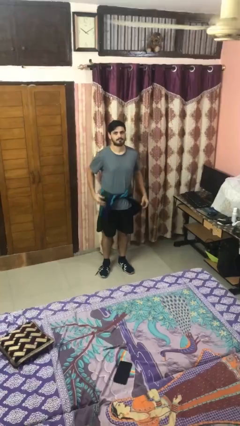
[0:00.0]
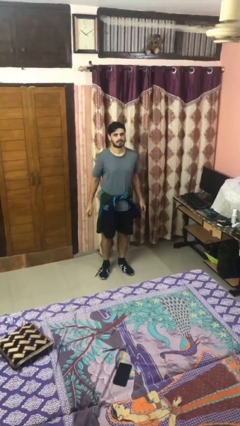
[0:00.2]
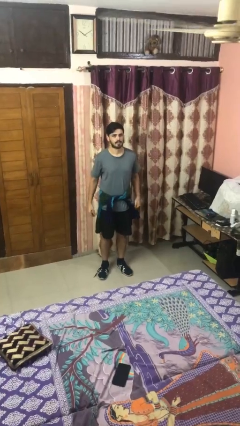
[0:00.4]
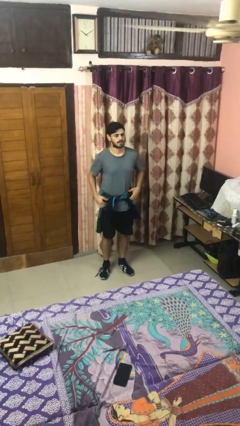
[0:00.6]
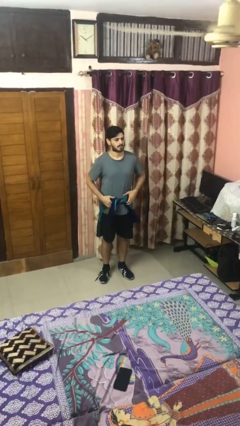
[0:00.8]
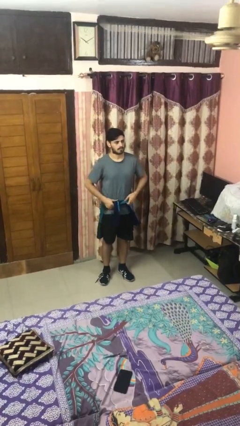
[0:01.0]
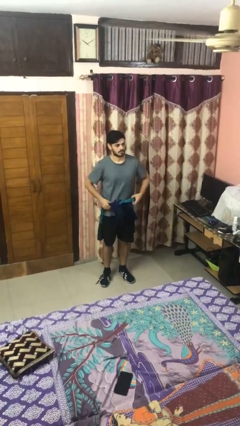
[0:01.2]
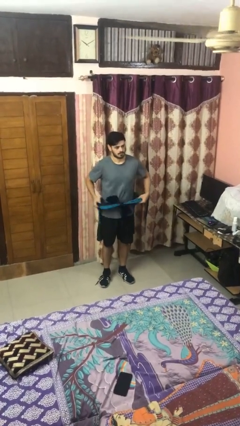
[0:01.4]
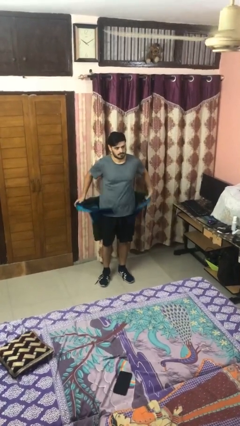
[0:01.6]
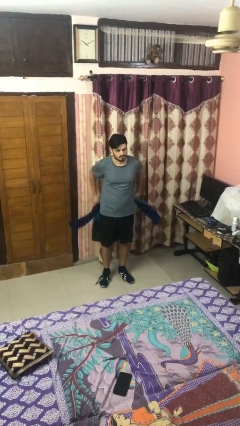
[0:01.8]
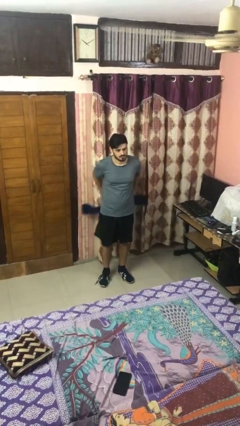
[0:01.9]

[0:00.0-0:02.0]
person unties jacket around waist

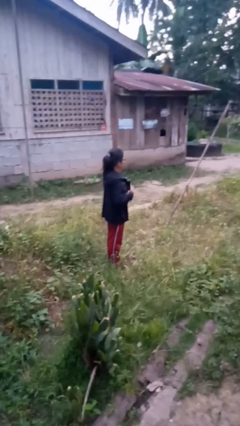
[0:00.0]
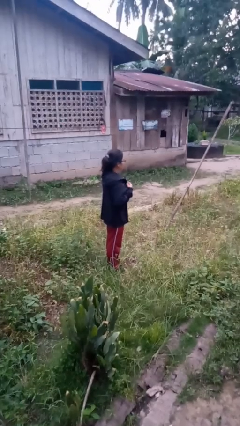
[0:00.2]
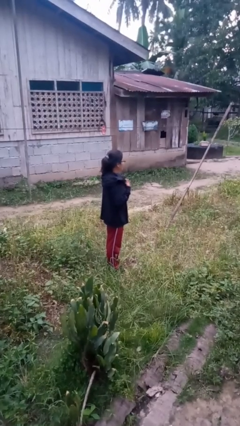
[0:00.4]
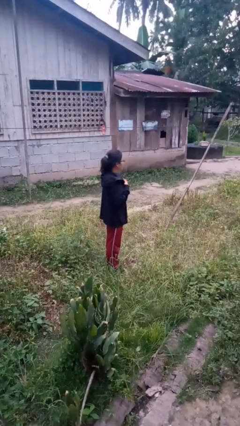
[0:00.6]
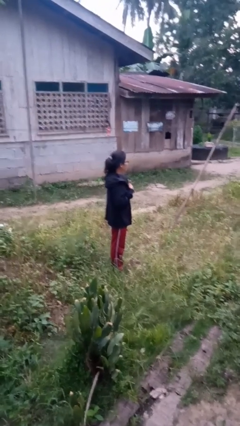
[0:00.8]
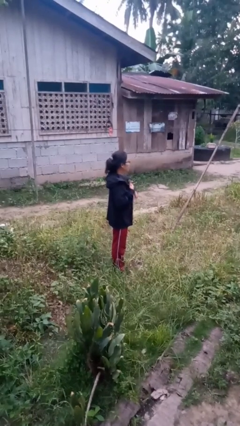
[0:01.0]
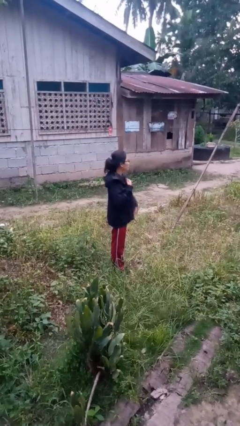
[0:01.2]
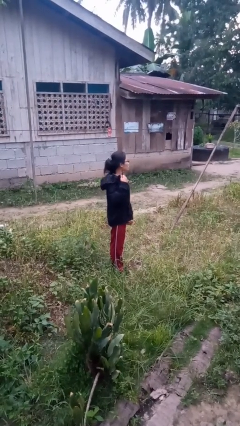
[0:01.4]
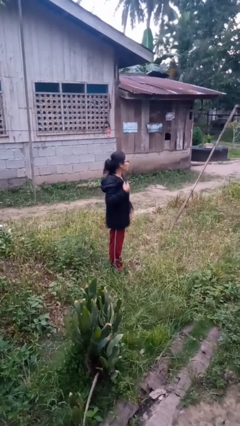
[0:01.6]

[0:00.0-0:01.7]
person unzips jacket

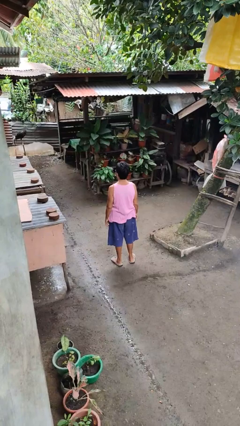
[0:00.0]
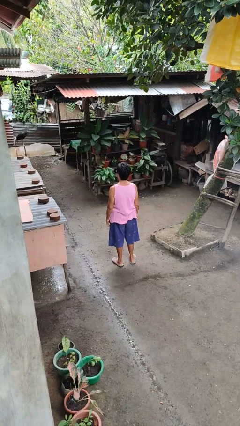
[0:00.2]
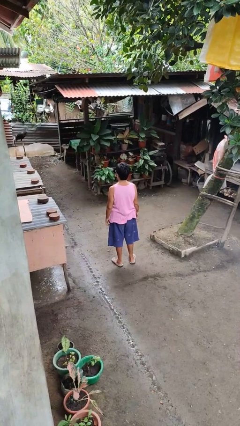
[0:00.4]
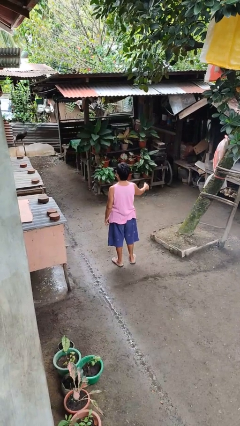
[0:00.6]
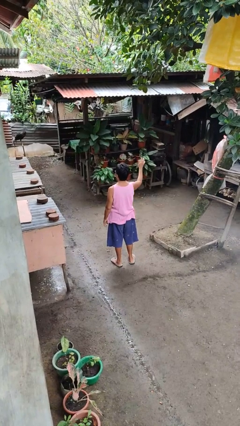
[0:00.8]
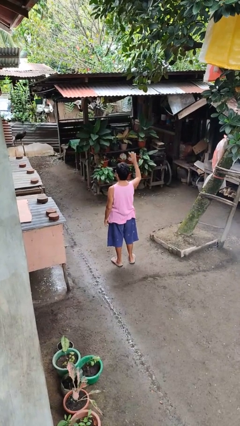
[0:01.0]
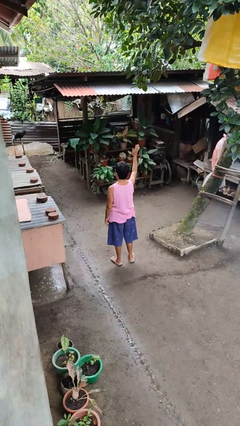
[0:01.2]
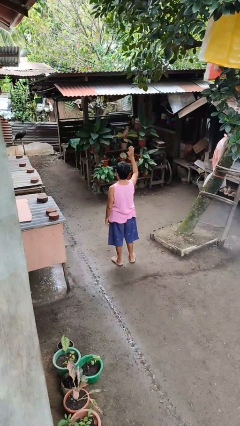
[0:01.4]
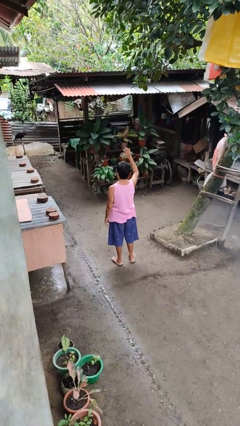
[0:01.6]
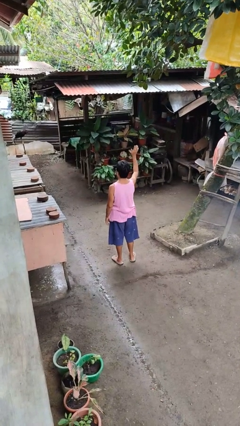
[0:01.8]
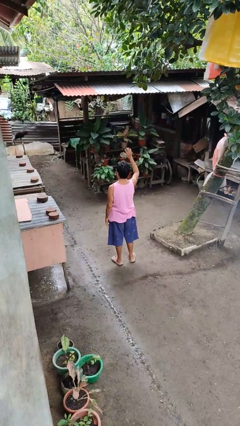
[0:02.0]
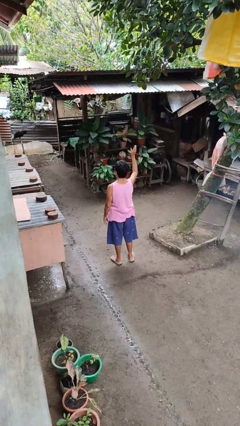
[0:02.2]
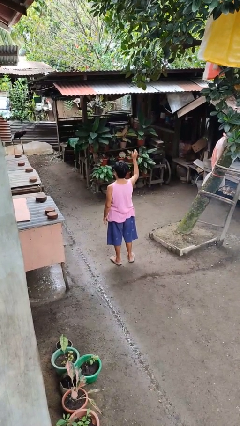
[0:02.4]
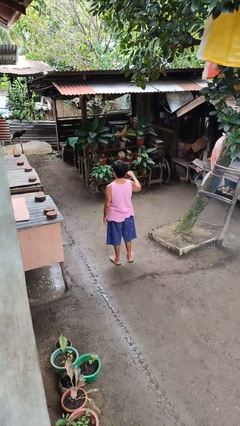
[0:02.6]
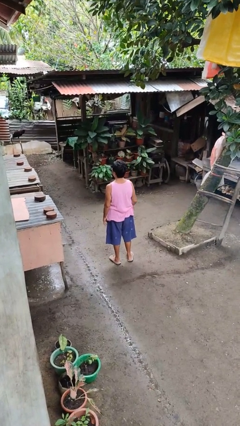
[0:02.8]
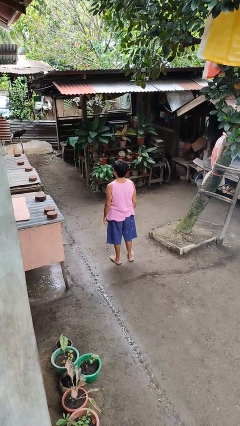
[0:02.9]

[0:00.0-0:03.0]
person waves at person

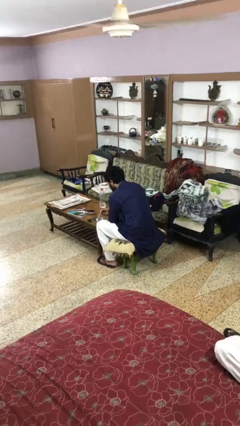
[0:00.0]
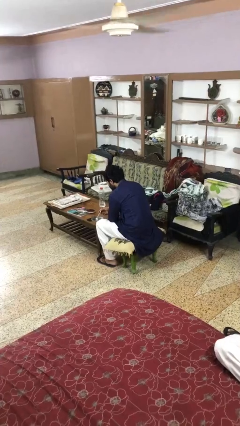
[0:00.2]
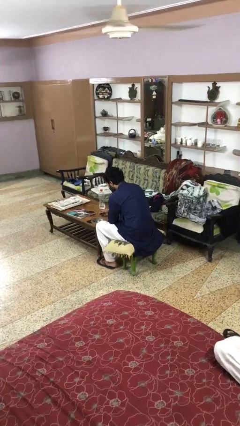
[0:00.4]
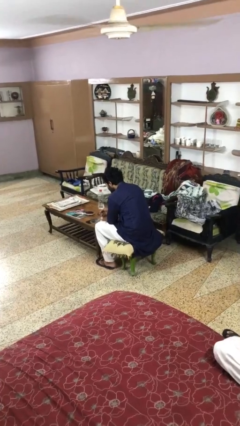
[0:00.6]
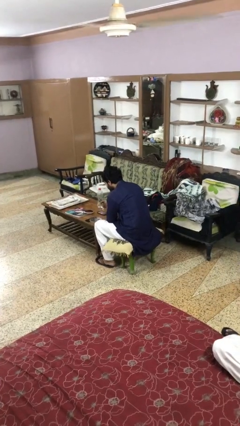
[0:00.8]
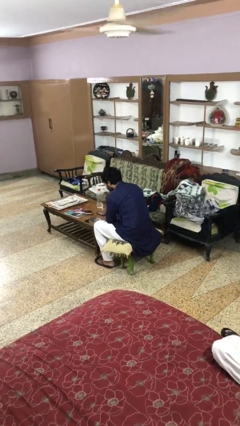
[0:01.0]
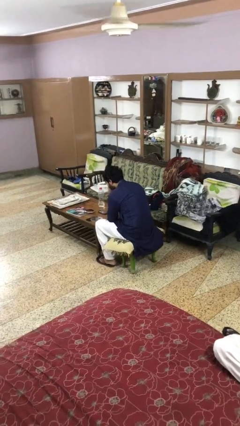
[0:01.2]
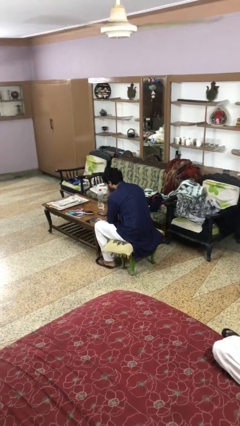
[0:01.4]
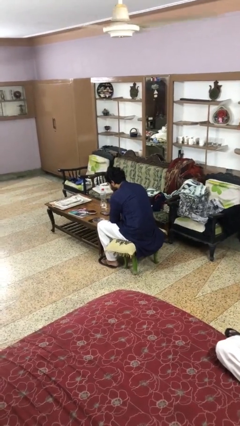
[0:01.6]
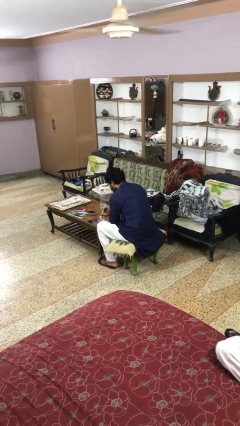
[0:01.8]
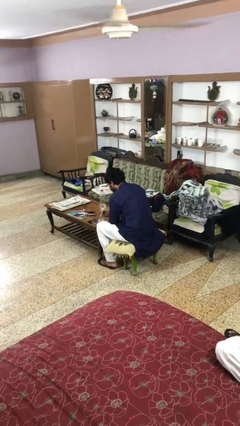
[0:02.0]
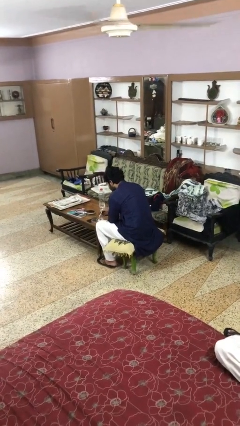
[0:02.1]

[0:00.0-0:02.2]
person eats with utensil

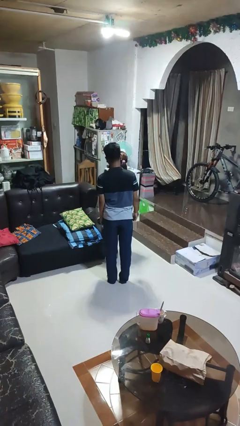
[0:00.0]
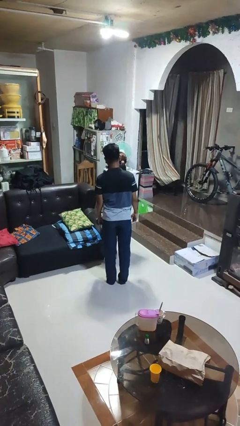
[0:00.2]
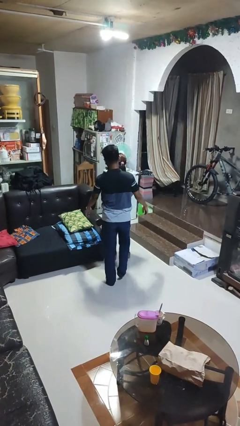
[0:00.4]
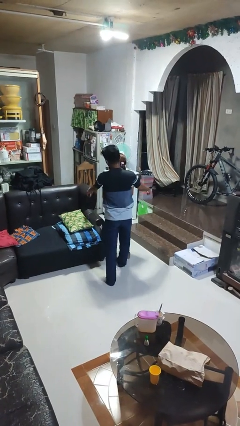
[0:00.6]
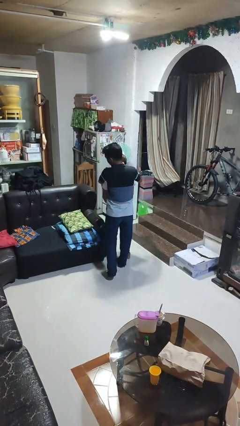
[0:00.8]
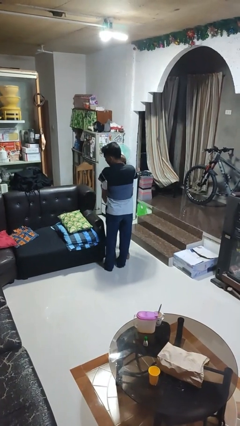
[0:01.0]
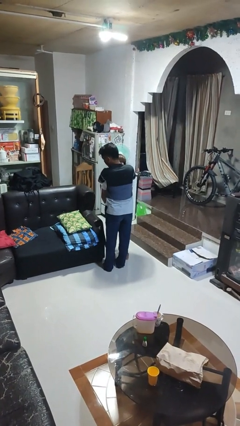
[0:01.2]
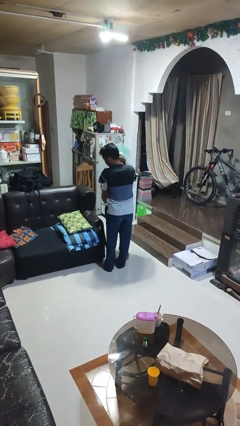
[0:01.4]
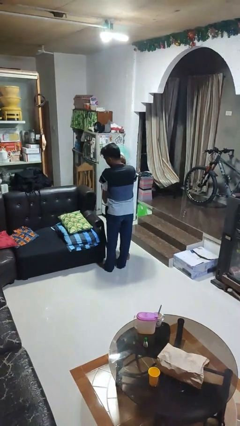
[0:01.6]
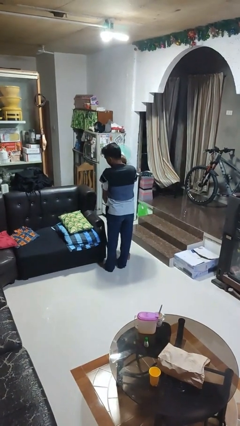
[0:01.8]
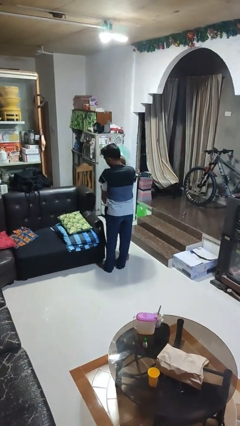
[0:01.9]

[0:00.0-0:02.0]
person hugs person from behind

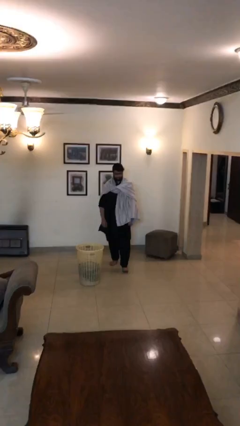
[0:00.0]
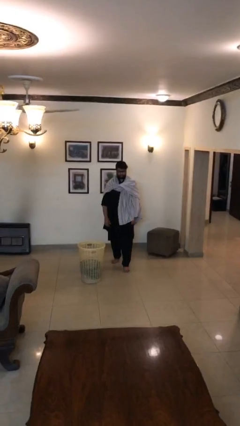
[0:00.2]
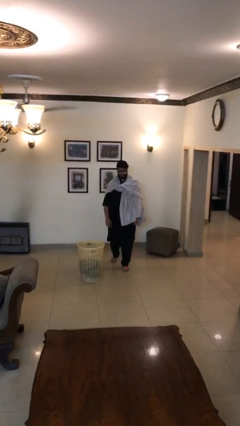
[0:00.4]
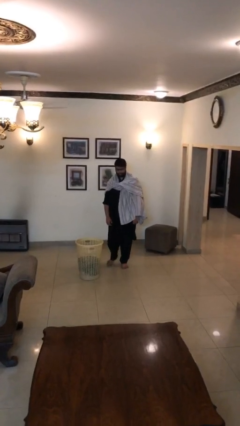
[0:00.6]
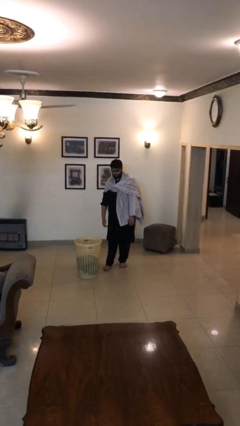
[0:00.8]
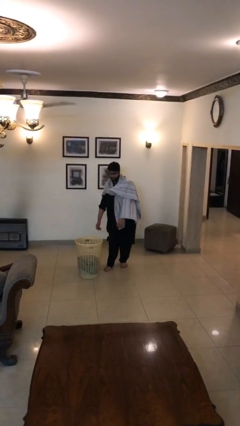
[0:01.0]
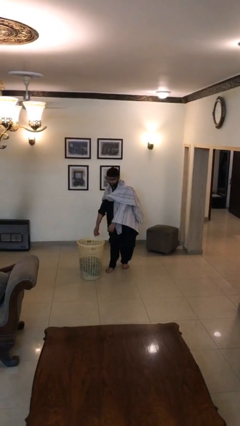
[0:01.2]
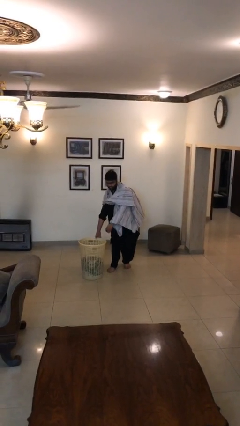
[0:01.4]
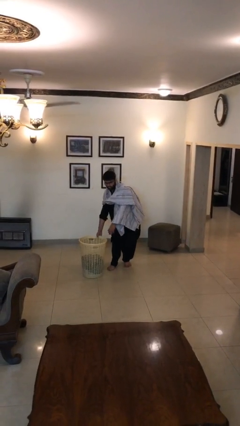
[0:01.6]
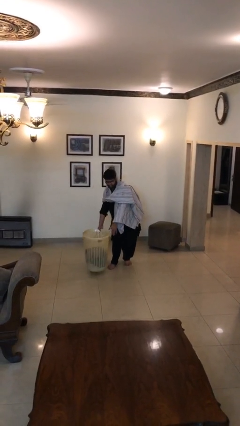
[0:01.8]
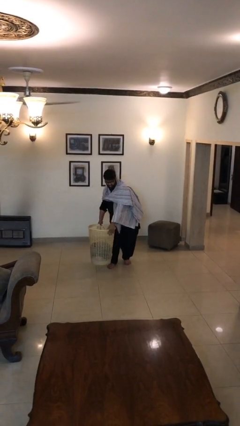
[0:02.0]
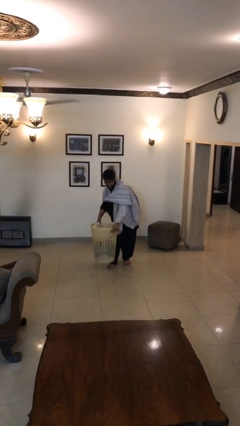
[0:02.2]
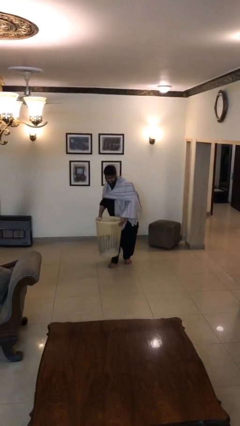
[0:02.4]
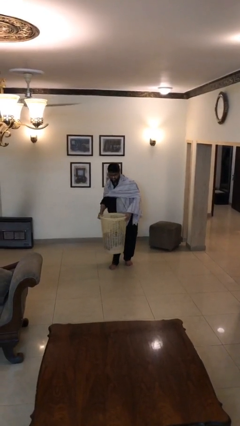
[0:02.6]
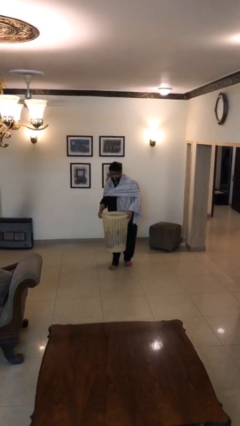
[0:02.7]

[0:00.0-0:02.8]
person picks up object from floor

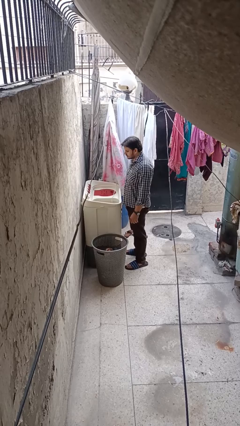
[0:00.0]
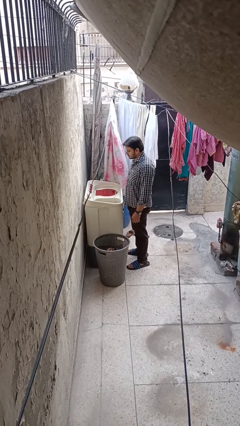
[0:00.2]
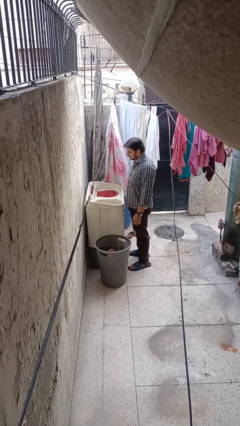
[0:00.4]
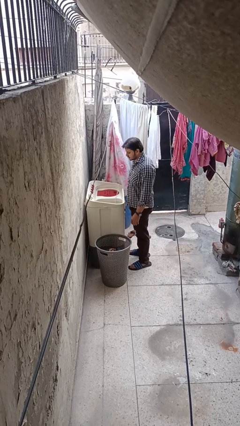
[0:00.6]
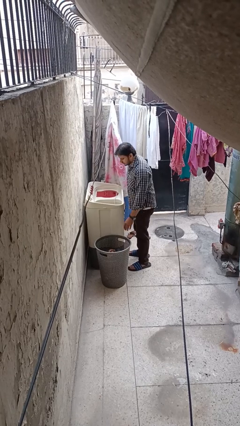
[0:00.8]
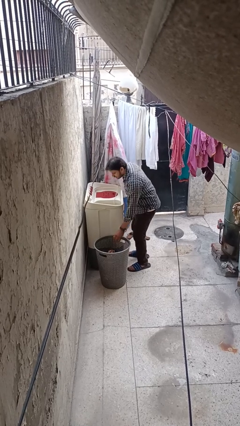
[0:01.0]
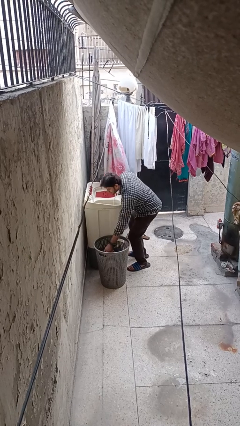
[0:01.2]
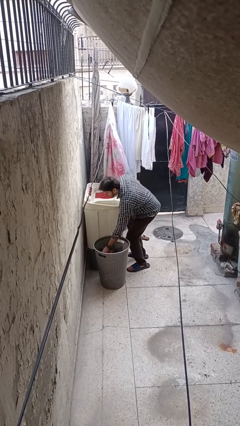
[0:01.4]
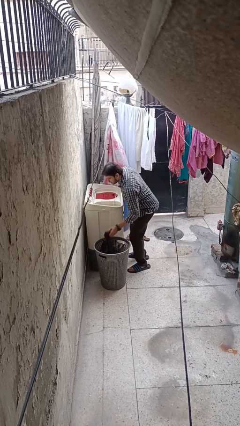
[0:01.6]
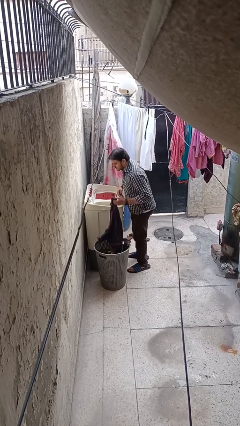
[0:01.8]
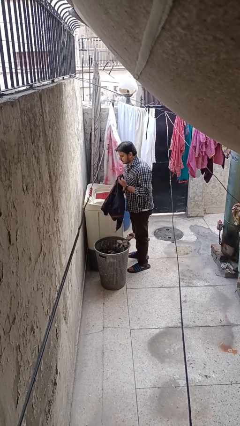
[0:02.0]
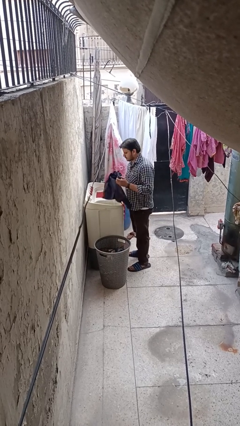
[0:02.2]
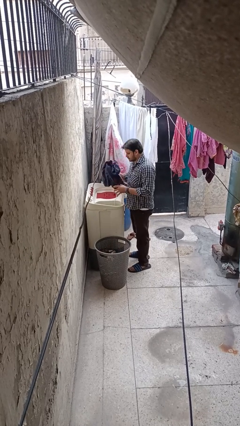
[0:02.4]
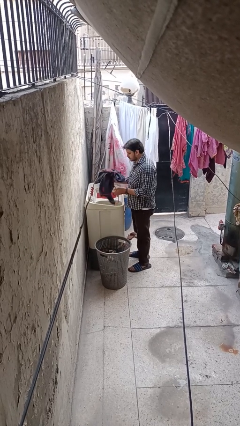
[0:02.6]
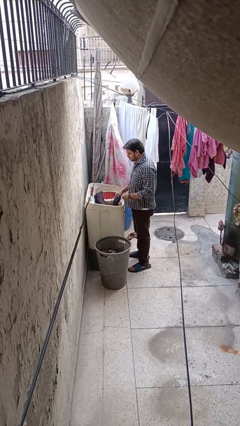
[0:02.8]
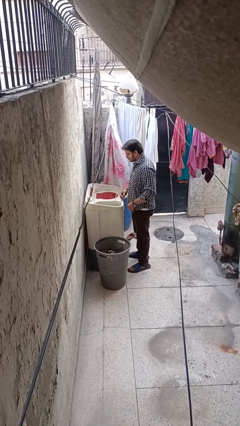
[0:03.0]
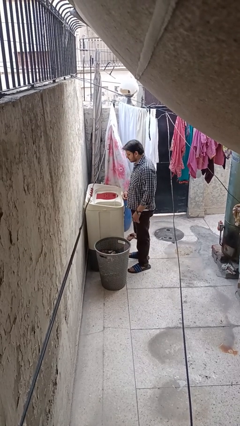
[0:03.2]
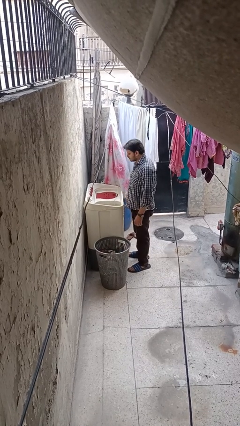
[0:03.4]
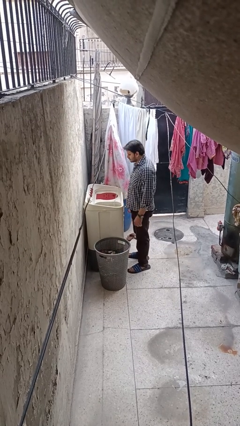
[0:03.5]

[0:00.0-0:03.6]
person unloads clotheswasher
